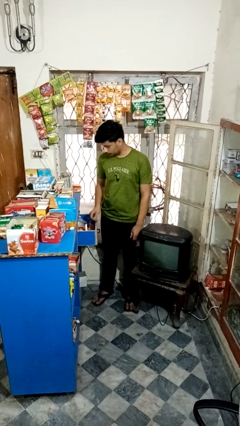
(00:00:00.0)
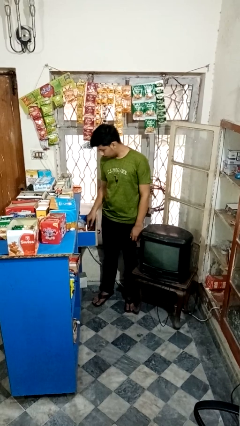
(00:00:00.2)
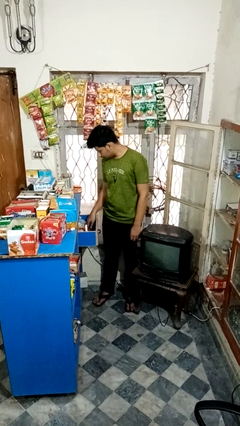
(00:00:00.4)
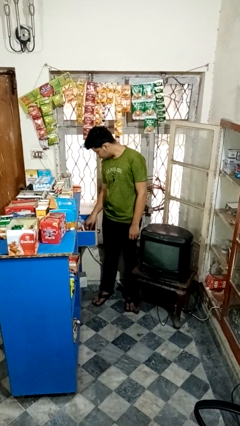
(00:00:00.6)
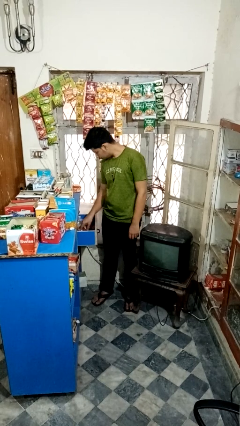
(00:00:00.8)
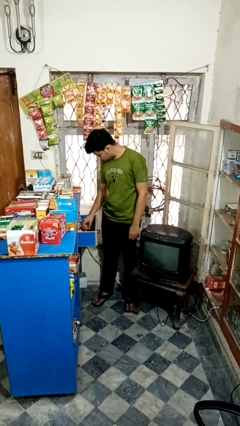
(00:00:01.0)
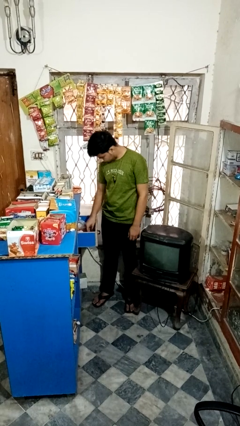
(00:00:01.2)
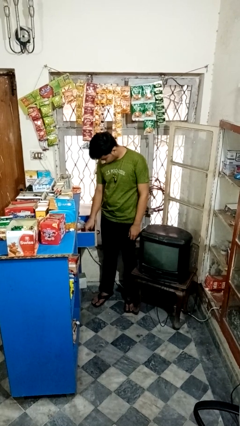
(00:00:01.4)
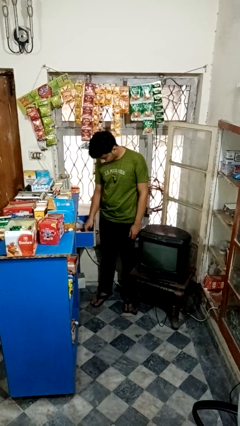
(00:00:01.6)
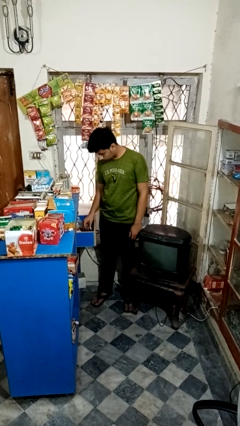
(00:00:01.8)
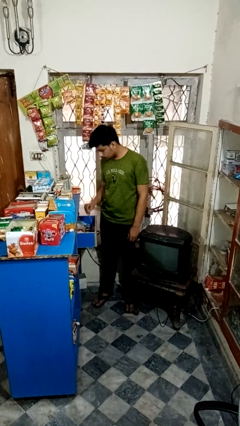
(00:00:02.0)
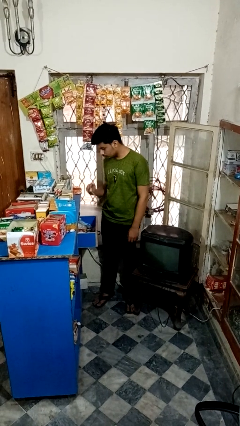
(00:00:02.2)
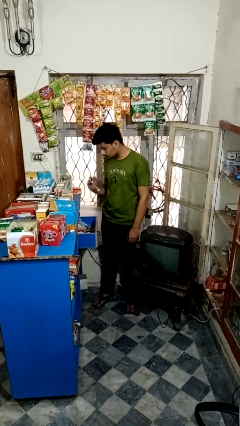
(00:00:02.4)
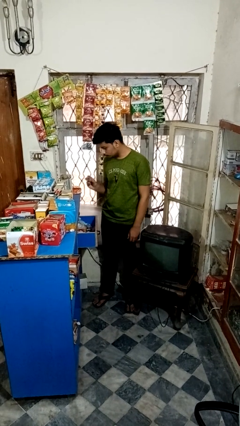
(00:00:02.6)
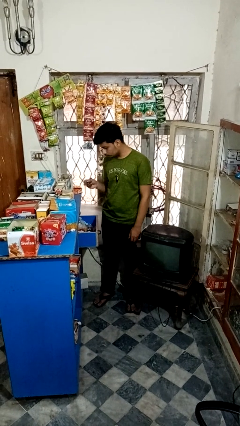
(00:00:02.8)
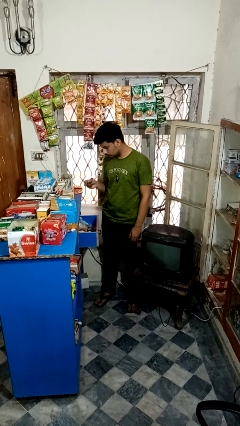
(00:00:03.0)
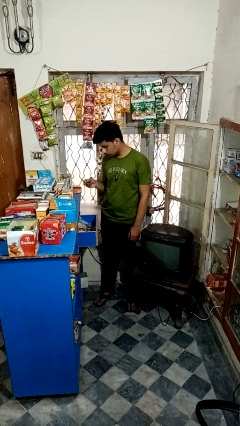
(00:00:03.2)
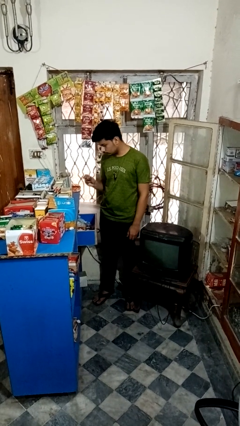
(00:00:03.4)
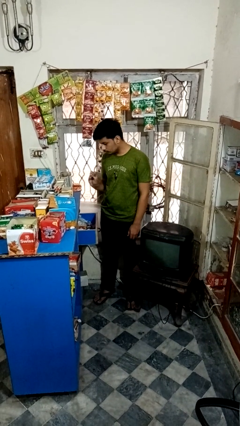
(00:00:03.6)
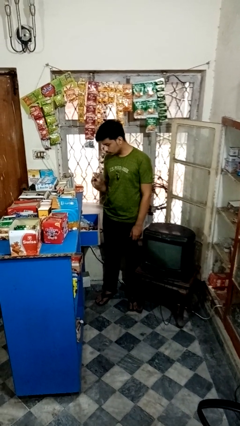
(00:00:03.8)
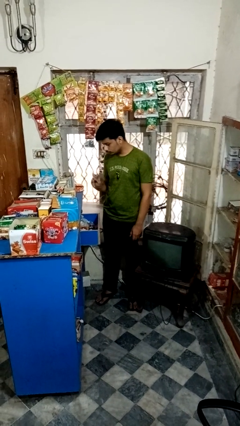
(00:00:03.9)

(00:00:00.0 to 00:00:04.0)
person searches in kitchen drawer

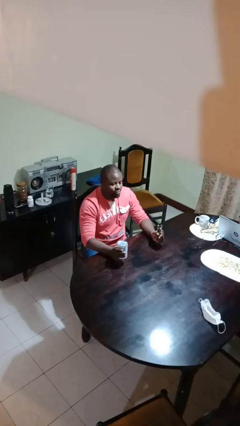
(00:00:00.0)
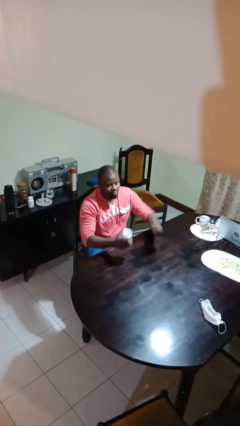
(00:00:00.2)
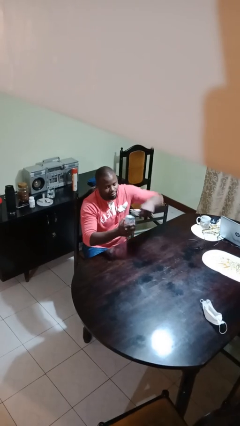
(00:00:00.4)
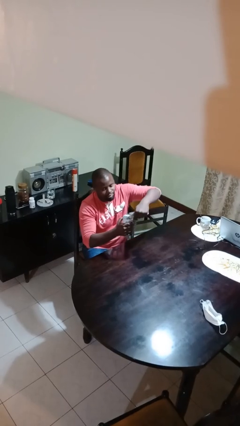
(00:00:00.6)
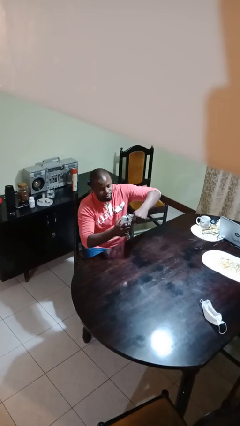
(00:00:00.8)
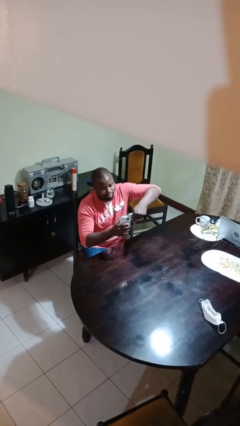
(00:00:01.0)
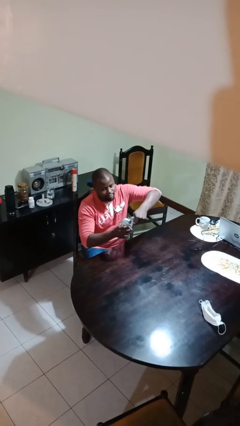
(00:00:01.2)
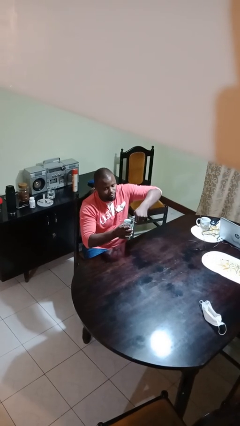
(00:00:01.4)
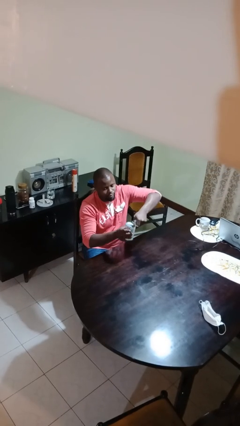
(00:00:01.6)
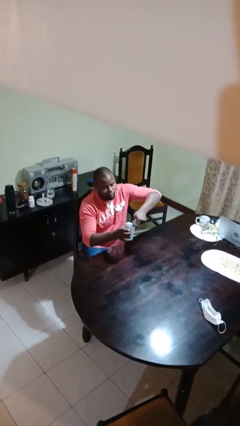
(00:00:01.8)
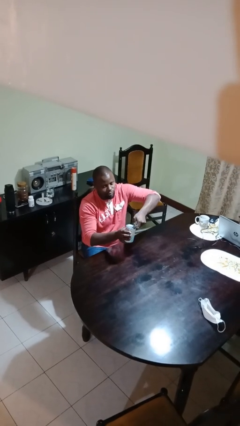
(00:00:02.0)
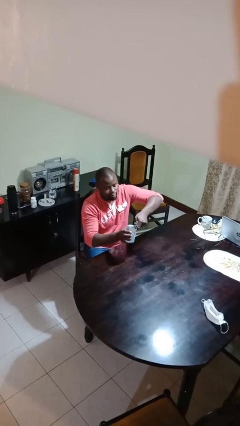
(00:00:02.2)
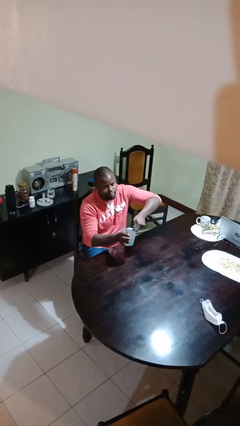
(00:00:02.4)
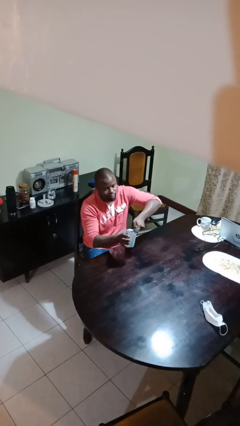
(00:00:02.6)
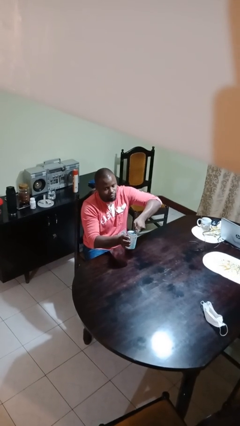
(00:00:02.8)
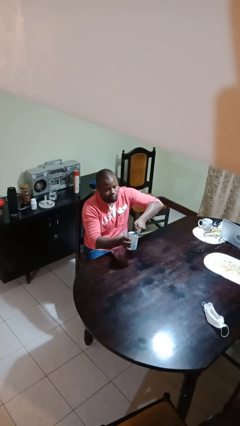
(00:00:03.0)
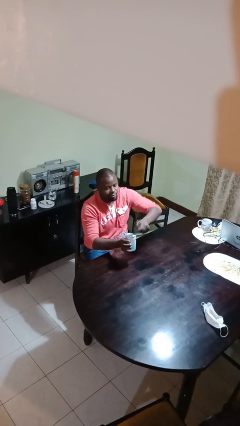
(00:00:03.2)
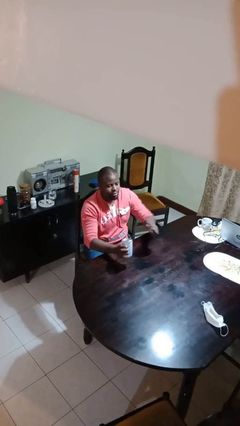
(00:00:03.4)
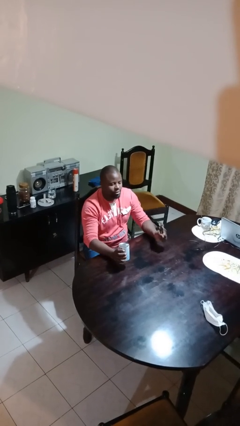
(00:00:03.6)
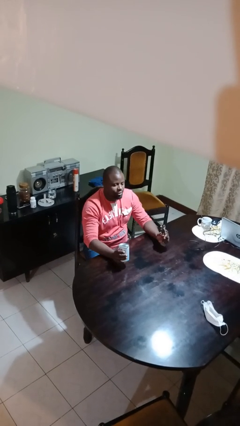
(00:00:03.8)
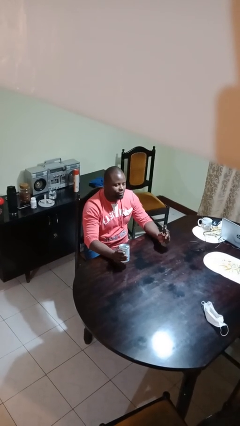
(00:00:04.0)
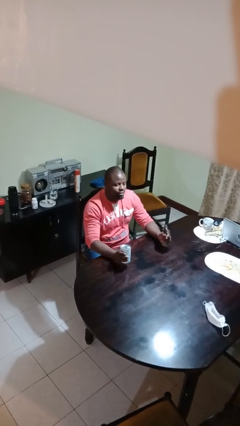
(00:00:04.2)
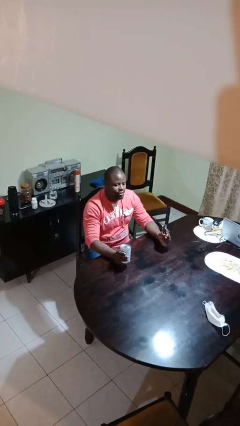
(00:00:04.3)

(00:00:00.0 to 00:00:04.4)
person opens can with can opener

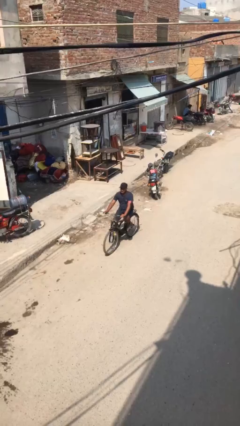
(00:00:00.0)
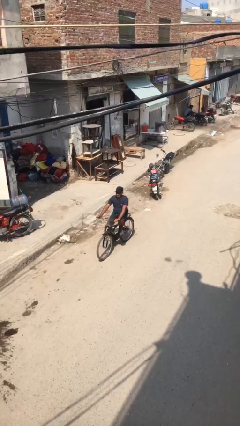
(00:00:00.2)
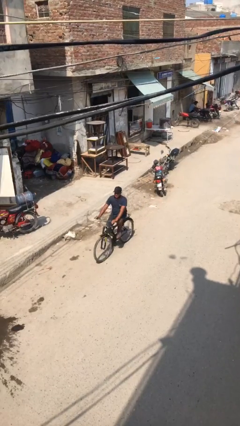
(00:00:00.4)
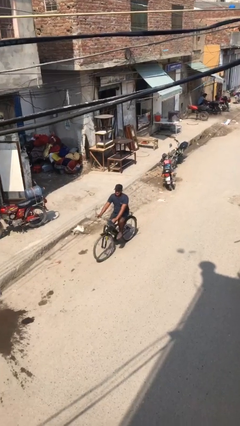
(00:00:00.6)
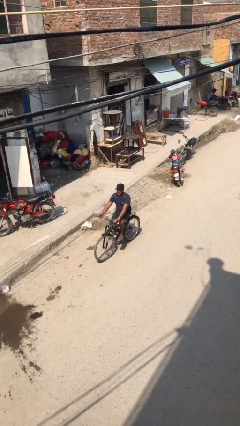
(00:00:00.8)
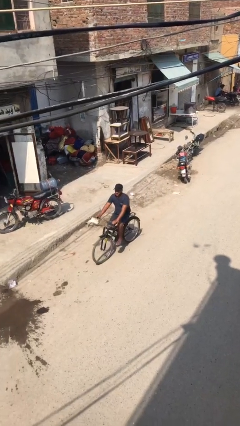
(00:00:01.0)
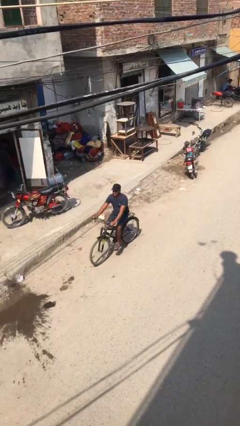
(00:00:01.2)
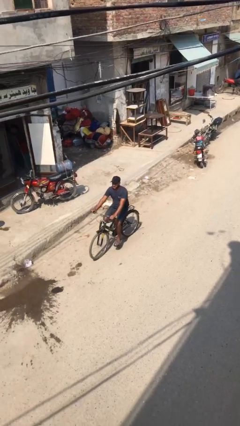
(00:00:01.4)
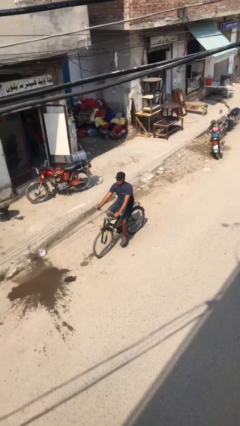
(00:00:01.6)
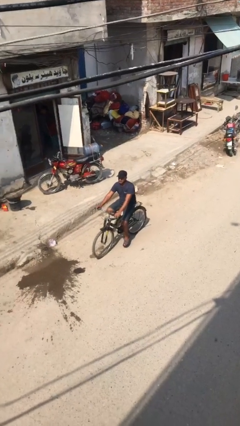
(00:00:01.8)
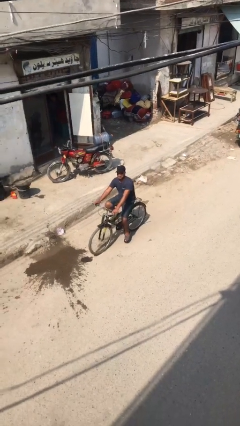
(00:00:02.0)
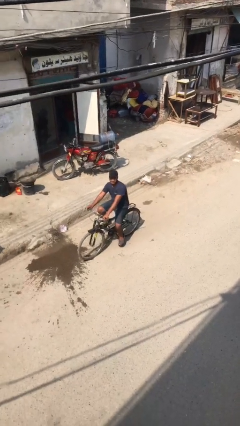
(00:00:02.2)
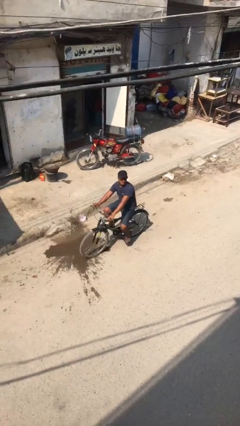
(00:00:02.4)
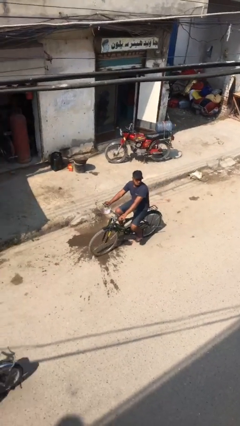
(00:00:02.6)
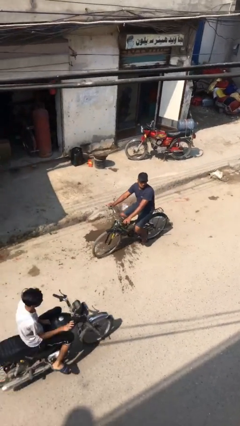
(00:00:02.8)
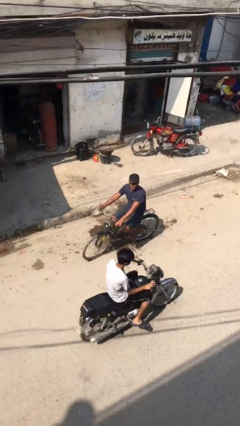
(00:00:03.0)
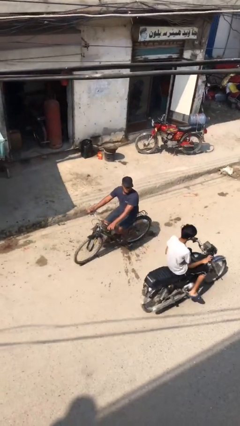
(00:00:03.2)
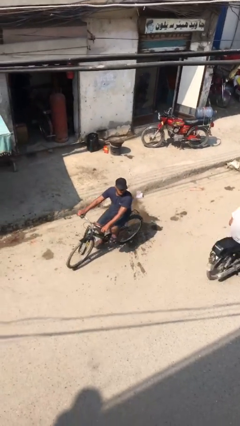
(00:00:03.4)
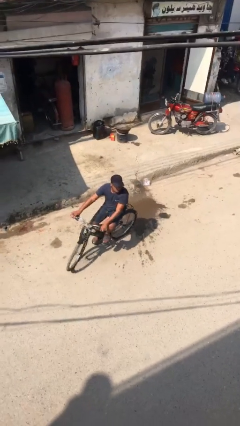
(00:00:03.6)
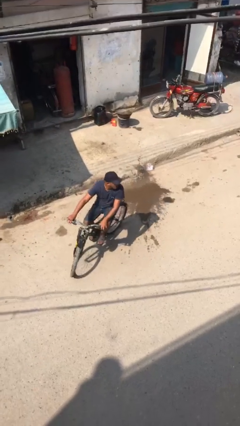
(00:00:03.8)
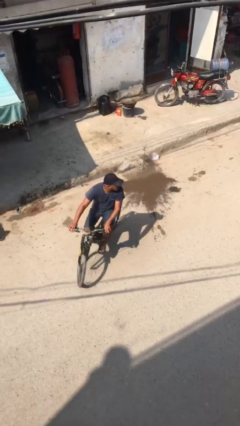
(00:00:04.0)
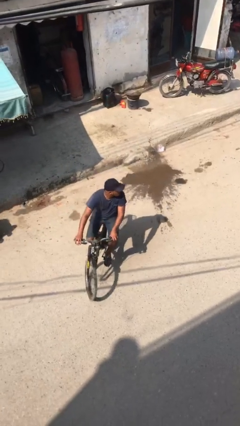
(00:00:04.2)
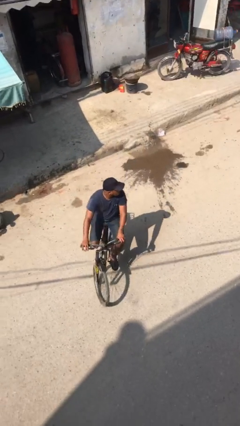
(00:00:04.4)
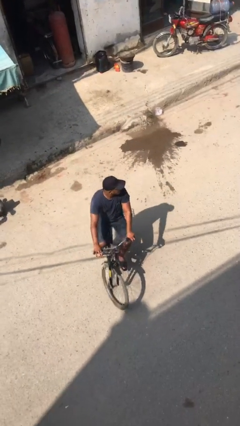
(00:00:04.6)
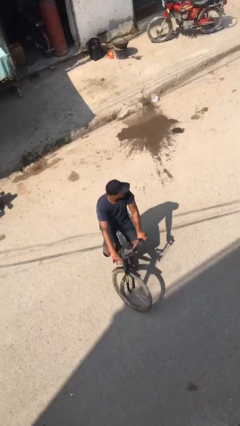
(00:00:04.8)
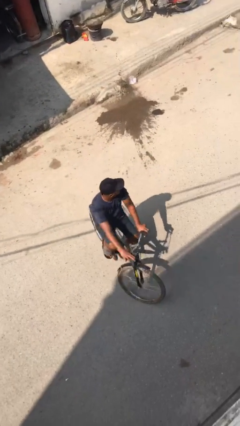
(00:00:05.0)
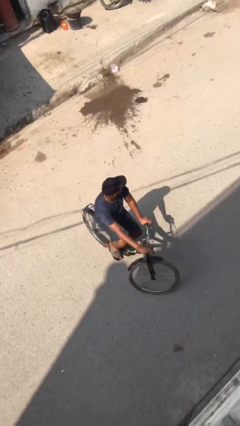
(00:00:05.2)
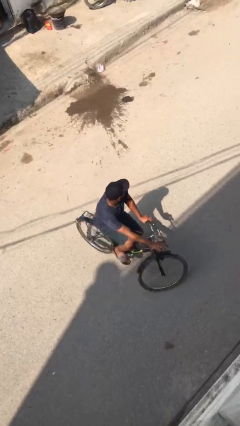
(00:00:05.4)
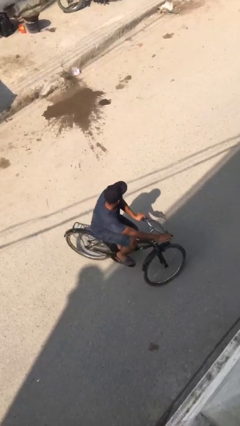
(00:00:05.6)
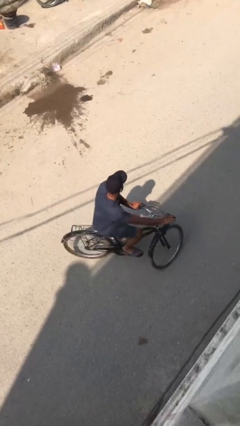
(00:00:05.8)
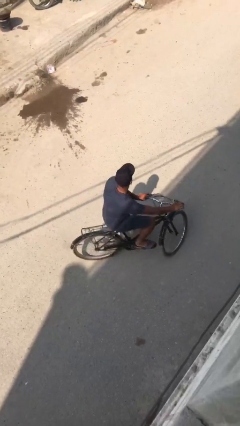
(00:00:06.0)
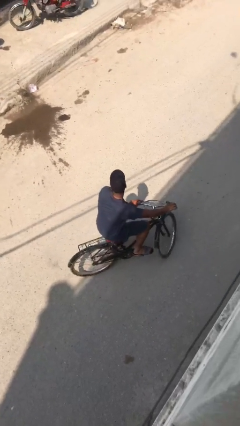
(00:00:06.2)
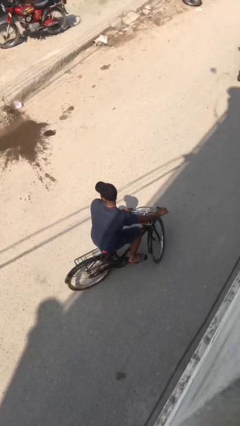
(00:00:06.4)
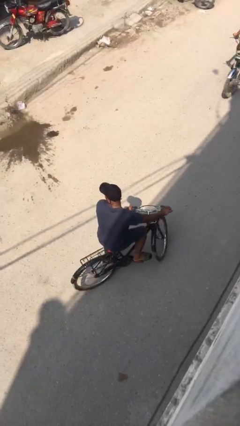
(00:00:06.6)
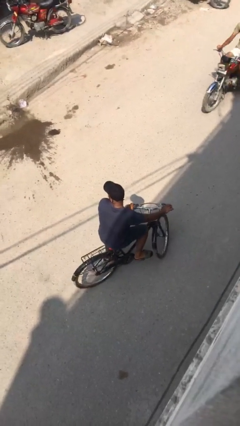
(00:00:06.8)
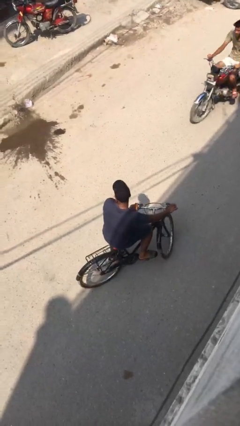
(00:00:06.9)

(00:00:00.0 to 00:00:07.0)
person rides bicycle

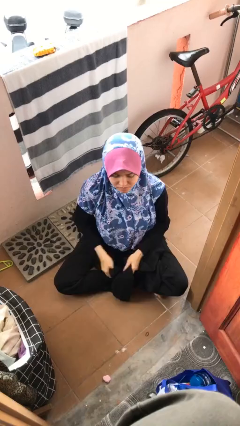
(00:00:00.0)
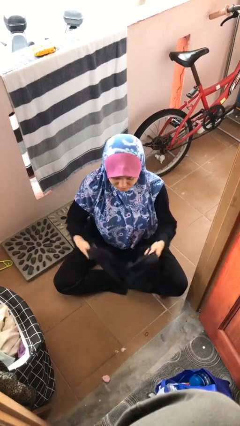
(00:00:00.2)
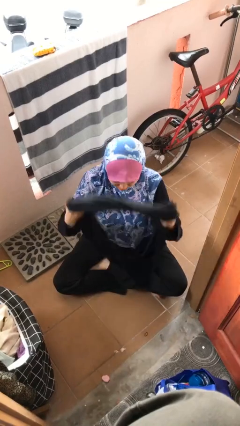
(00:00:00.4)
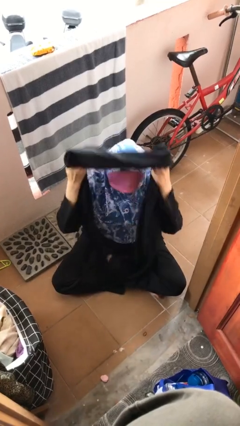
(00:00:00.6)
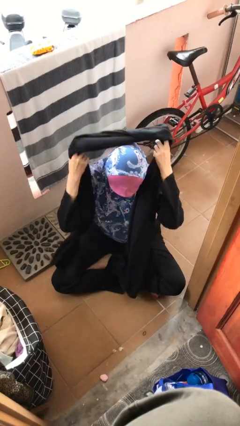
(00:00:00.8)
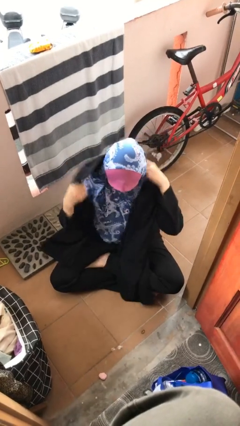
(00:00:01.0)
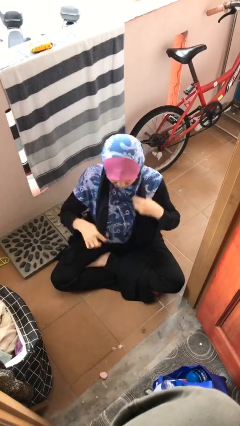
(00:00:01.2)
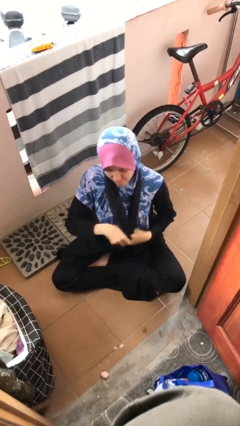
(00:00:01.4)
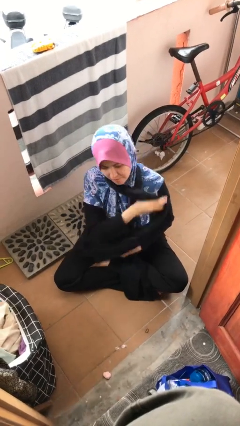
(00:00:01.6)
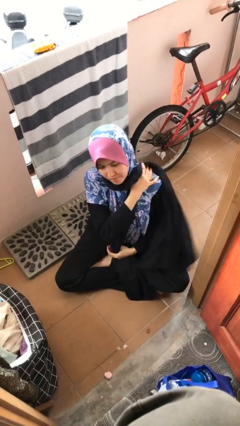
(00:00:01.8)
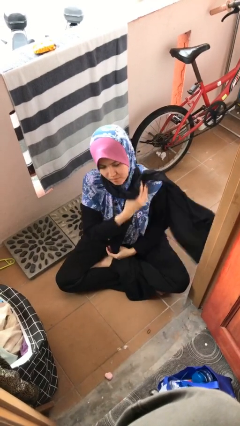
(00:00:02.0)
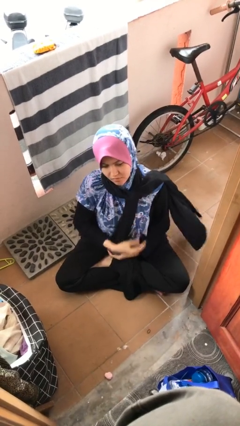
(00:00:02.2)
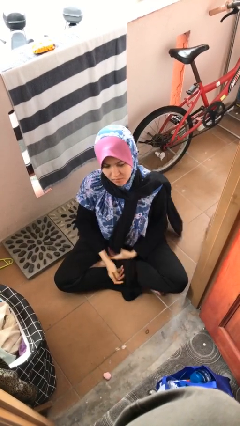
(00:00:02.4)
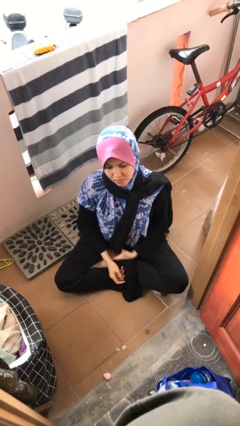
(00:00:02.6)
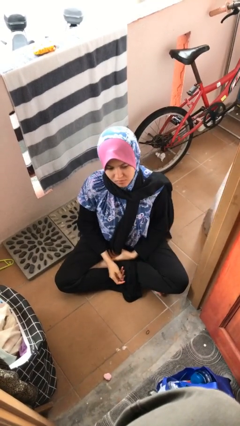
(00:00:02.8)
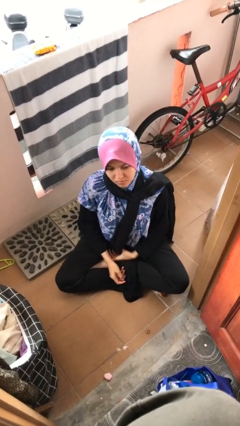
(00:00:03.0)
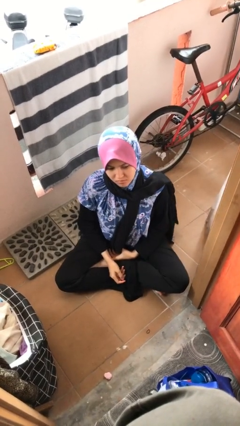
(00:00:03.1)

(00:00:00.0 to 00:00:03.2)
person puts on scarf
